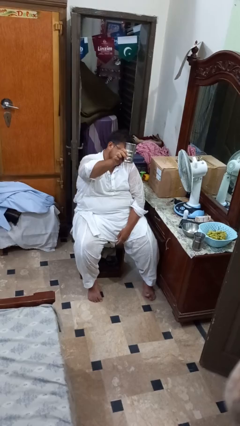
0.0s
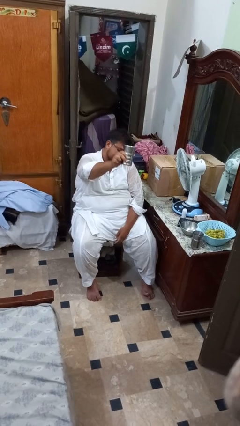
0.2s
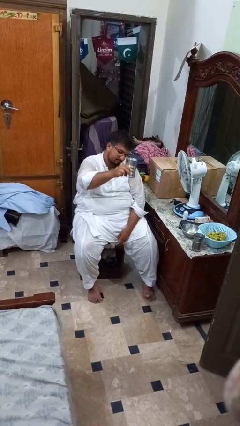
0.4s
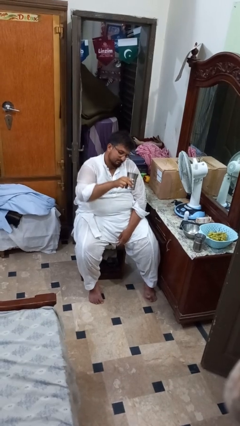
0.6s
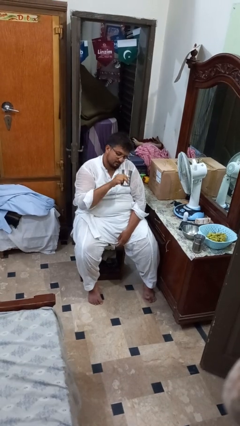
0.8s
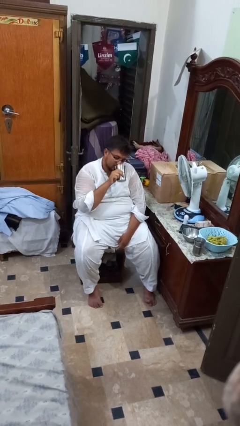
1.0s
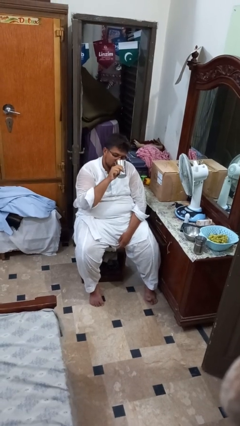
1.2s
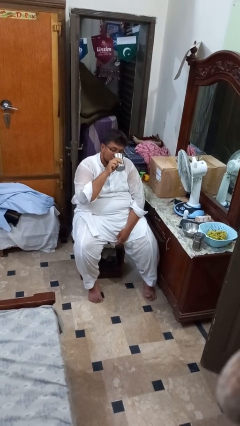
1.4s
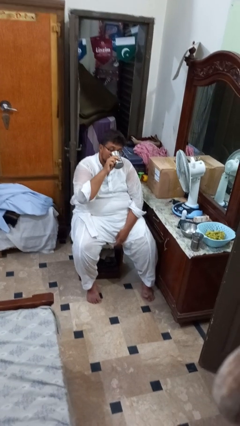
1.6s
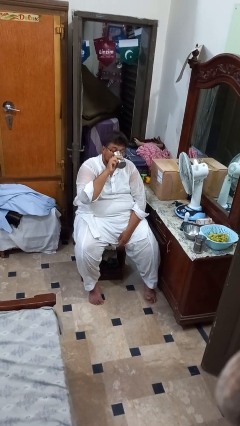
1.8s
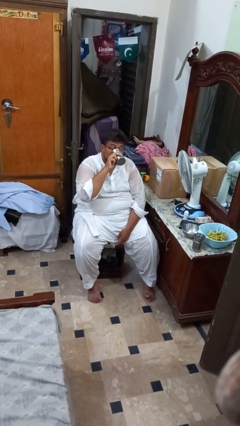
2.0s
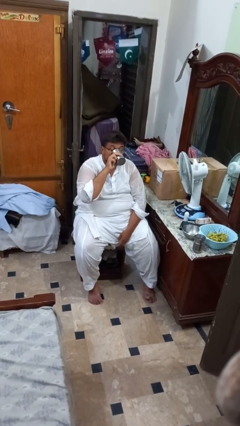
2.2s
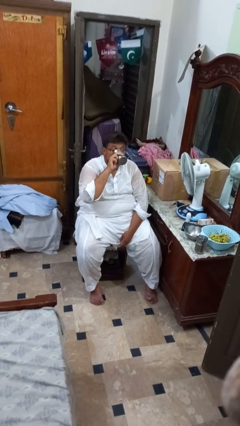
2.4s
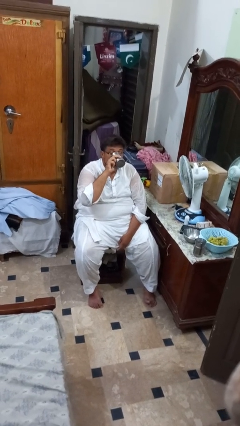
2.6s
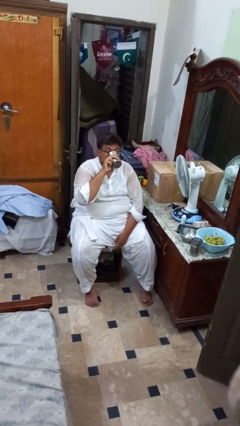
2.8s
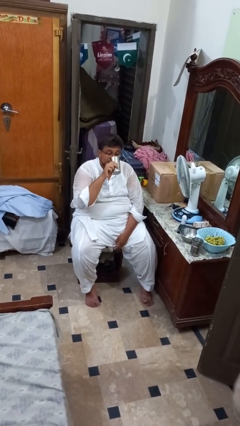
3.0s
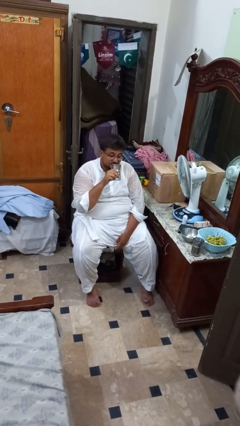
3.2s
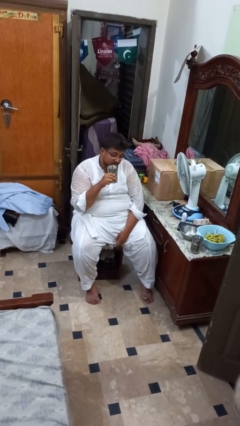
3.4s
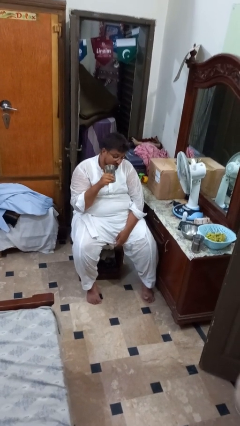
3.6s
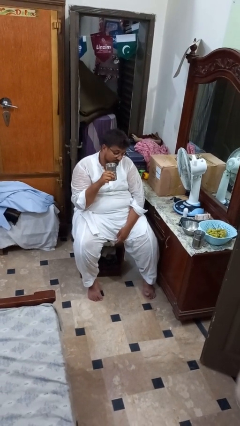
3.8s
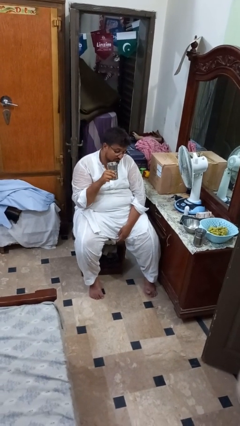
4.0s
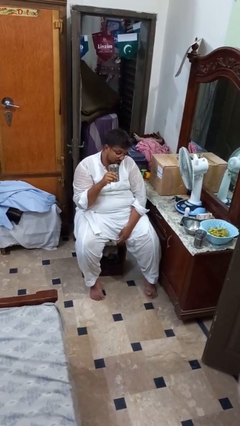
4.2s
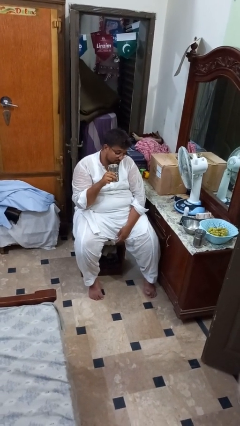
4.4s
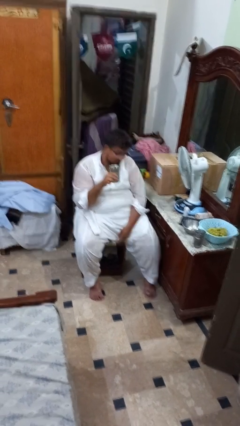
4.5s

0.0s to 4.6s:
person drinks from shotglass

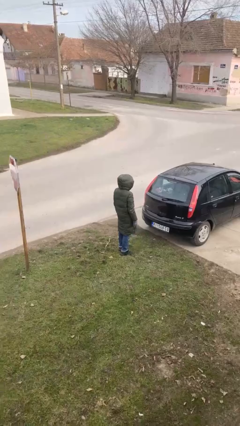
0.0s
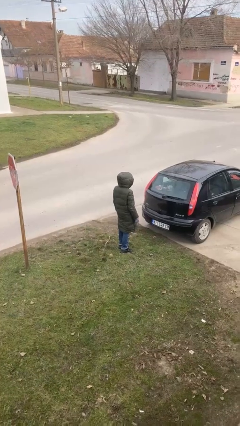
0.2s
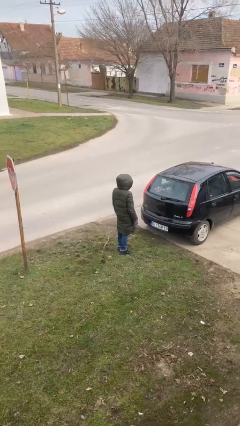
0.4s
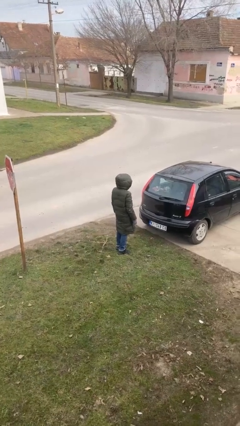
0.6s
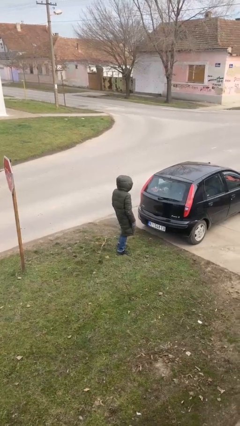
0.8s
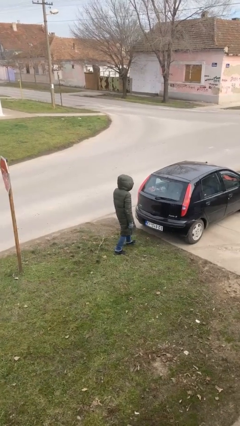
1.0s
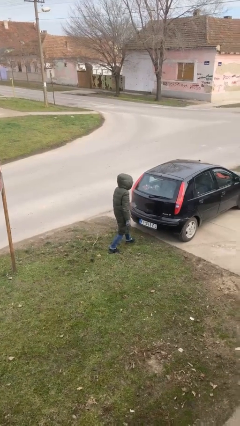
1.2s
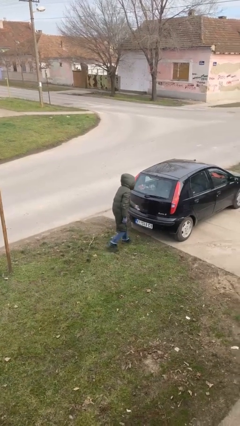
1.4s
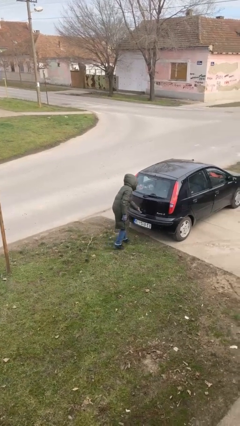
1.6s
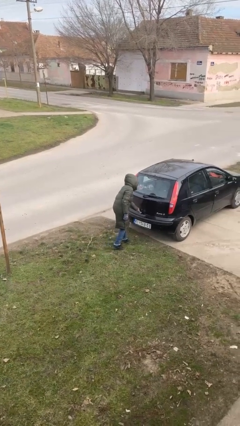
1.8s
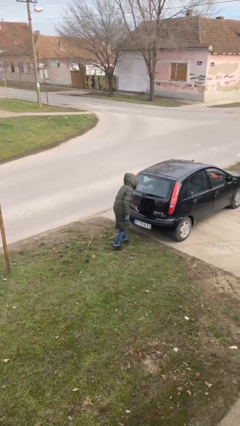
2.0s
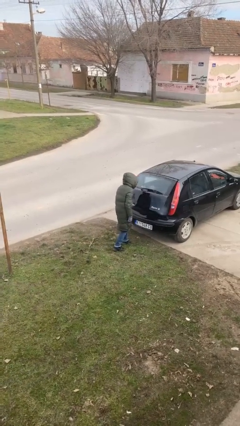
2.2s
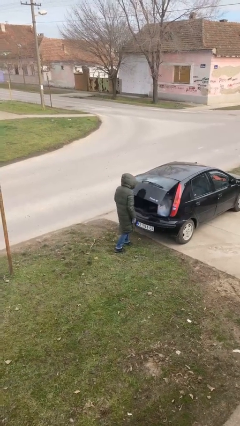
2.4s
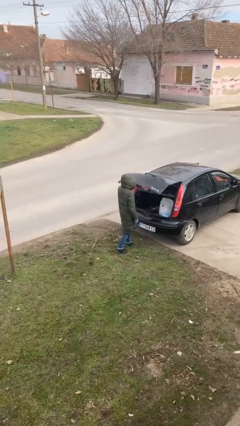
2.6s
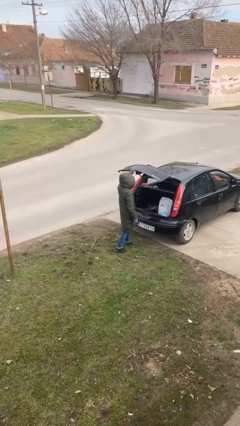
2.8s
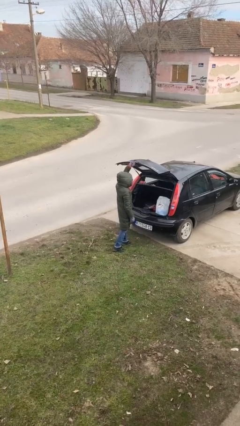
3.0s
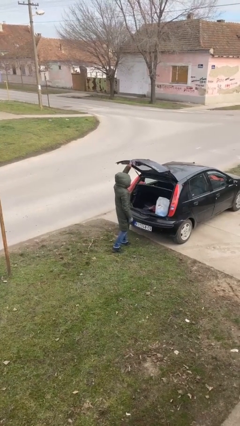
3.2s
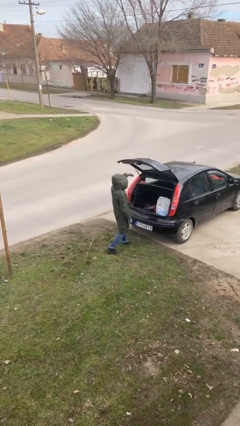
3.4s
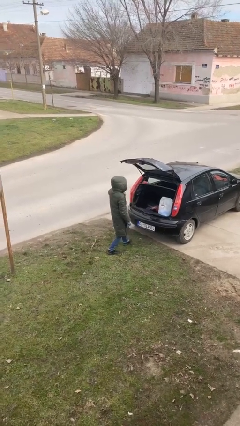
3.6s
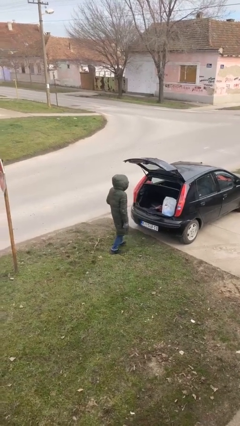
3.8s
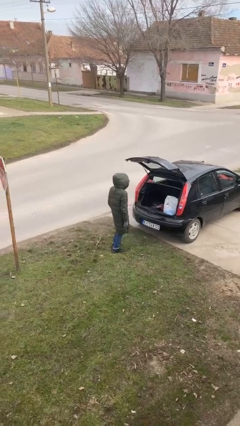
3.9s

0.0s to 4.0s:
person opens car trunk

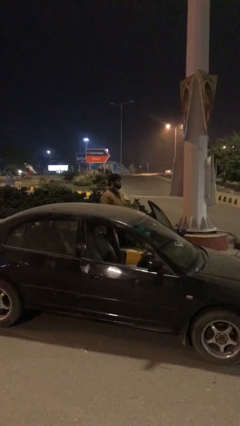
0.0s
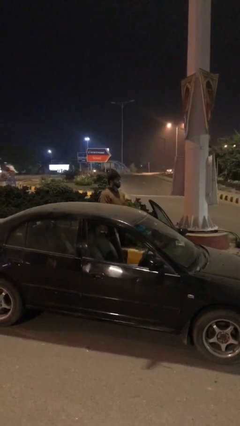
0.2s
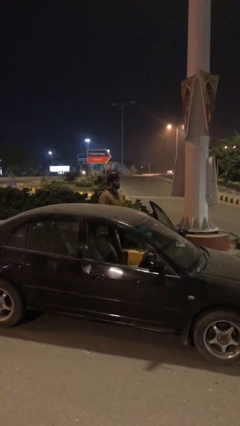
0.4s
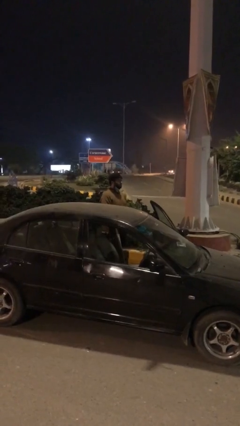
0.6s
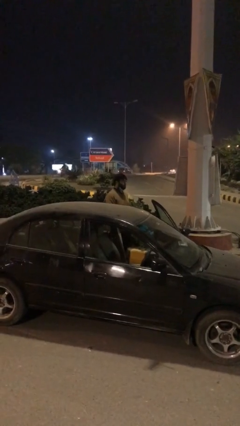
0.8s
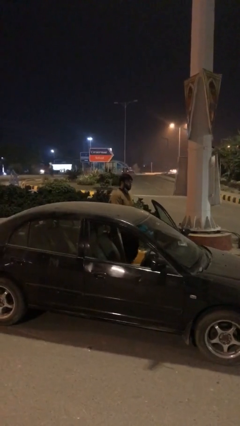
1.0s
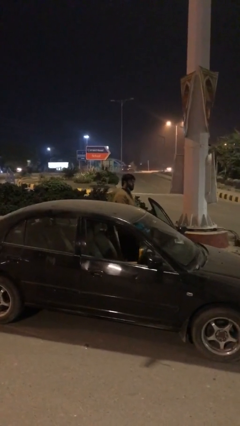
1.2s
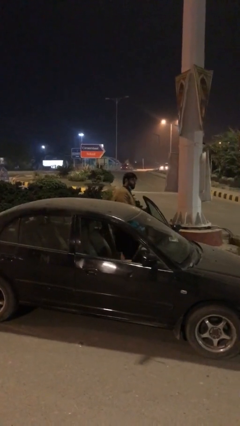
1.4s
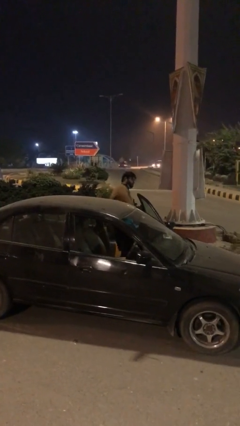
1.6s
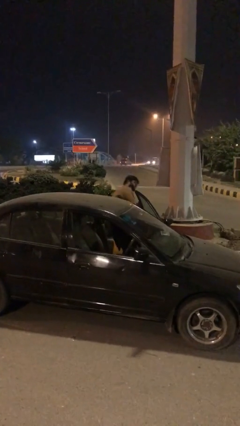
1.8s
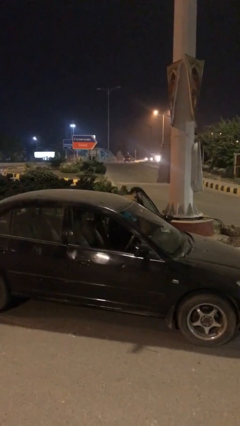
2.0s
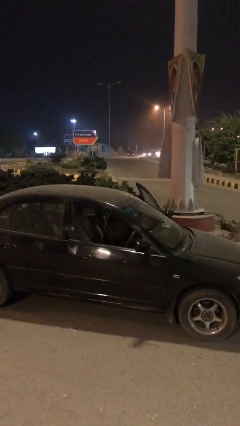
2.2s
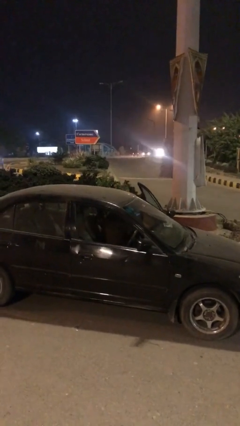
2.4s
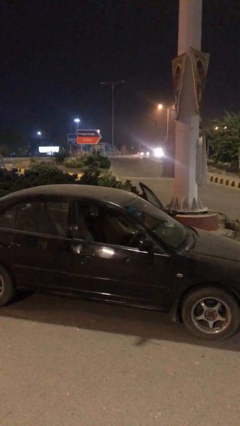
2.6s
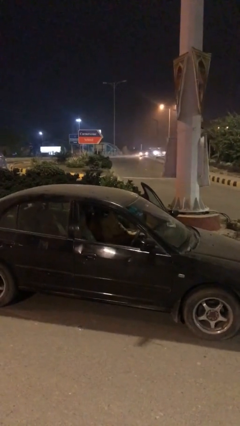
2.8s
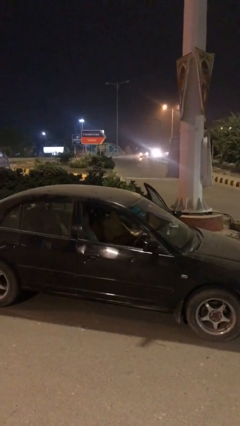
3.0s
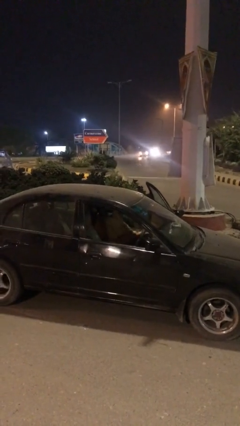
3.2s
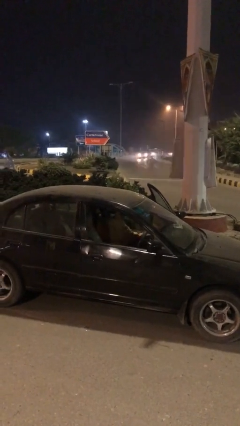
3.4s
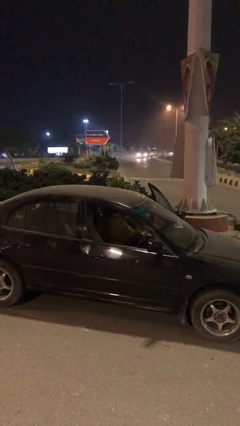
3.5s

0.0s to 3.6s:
person enters car

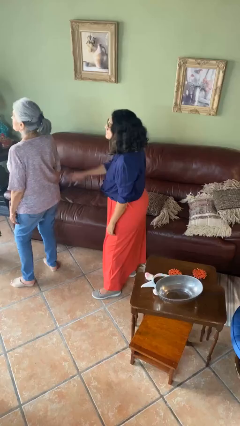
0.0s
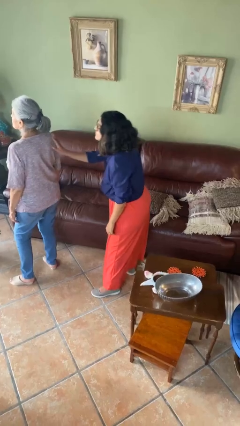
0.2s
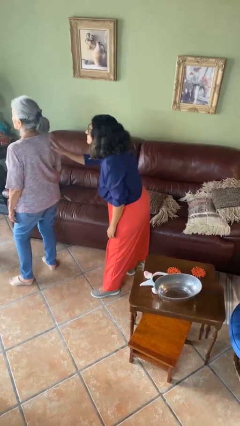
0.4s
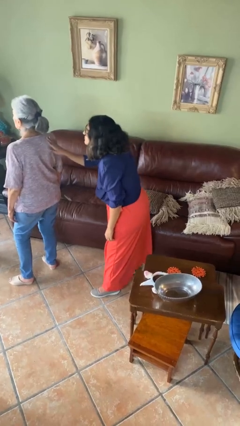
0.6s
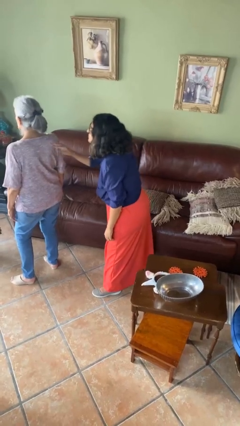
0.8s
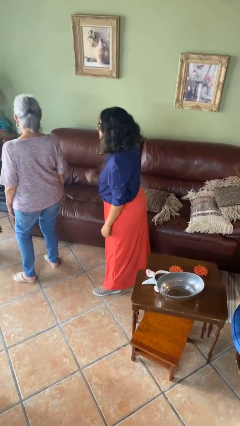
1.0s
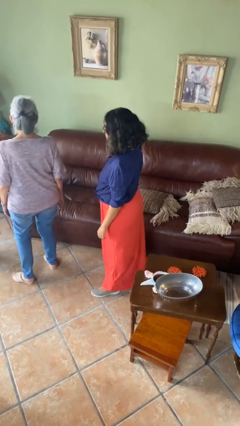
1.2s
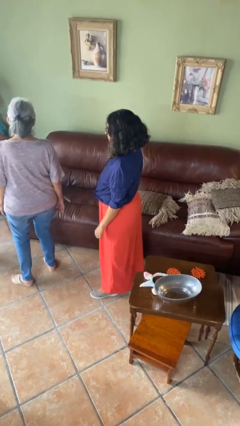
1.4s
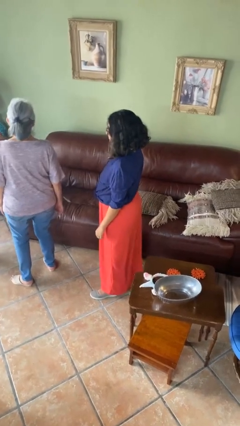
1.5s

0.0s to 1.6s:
person touches back of person

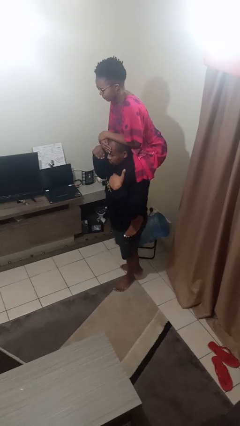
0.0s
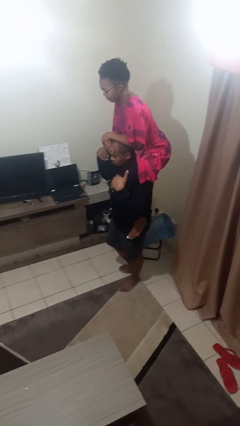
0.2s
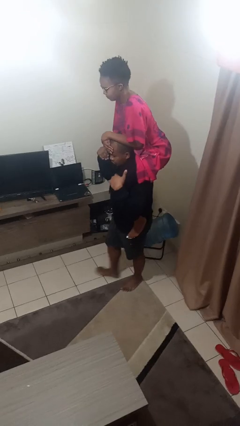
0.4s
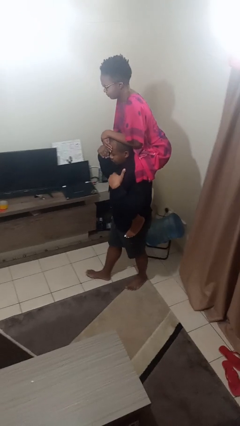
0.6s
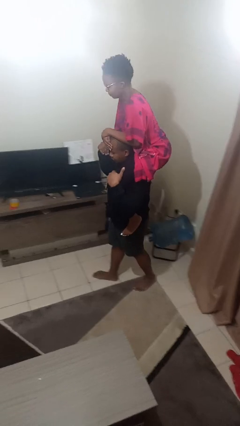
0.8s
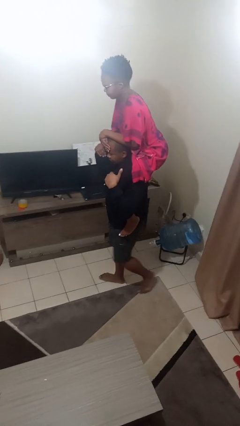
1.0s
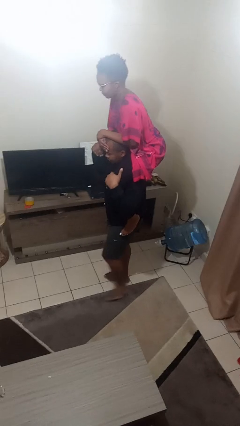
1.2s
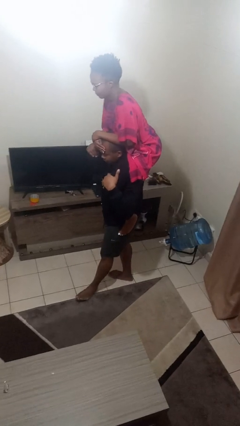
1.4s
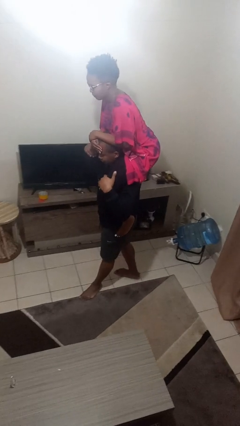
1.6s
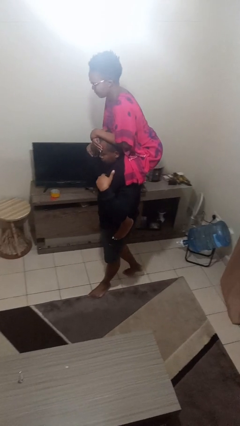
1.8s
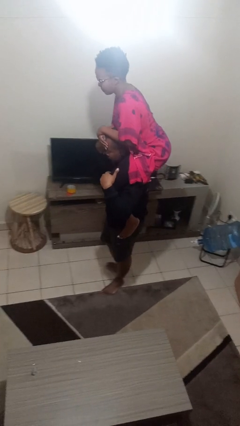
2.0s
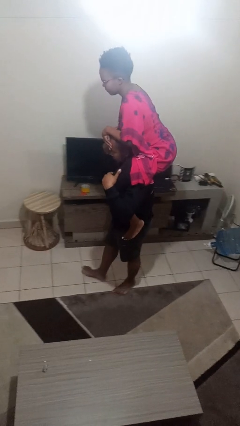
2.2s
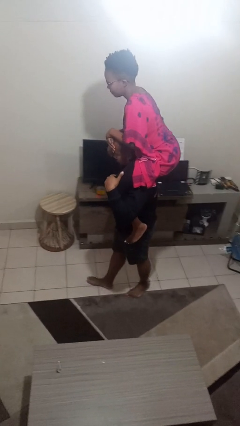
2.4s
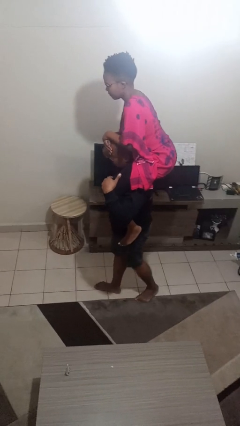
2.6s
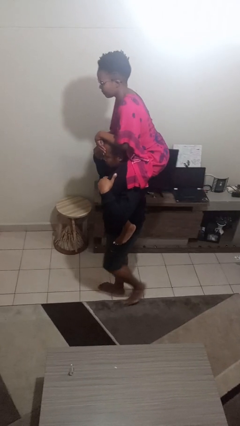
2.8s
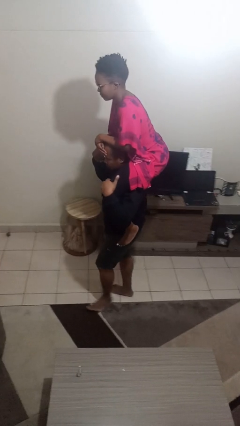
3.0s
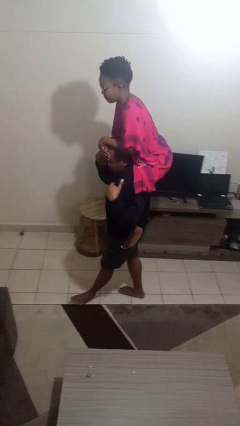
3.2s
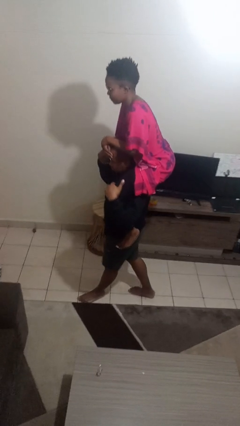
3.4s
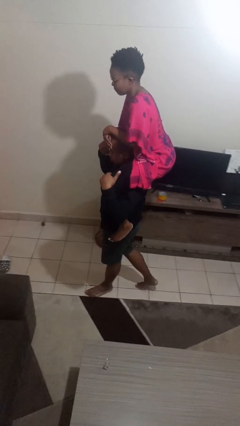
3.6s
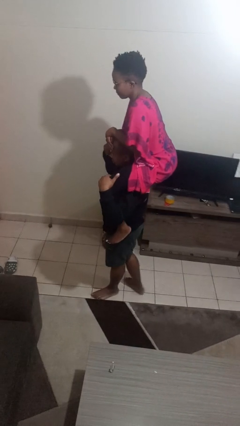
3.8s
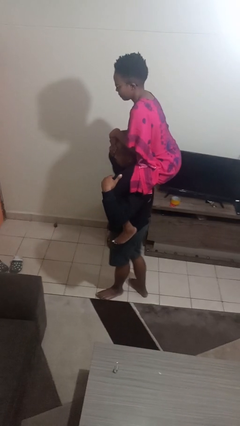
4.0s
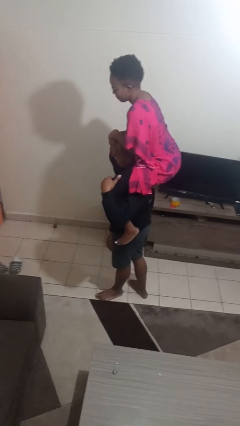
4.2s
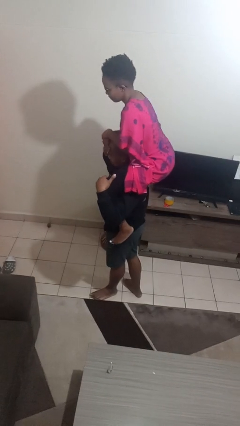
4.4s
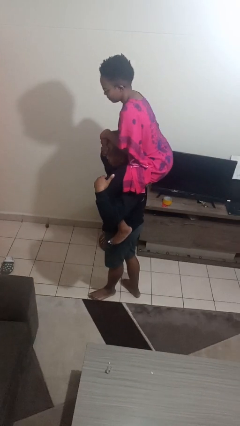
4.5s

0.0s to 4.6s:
person carries person on shoulders
